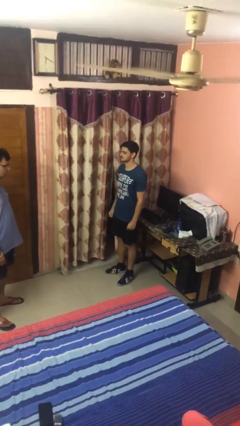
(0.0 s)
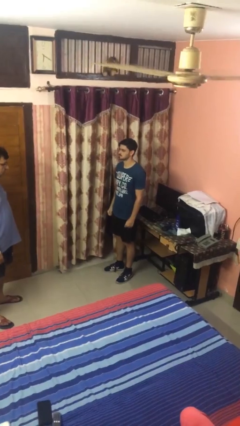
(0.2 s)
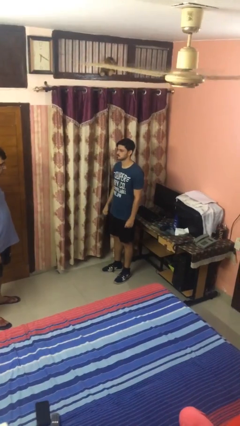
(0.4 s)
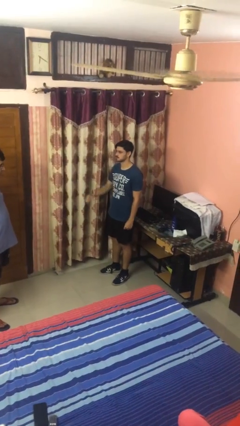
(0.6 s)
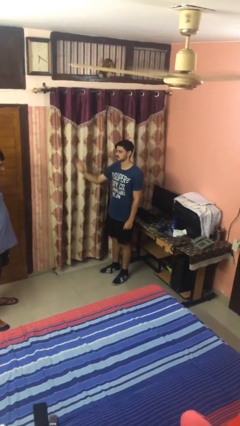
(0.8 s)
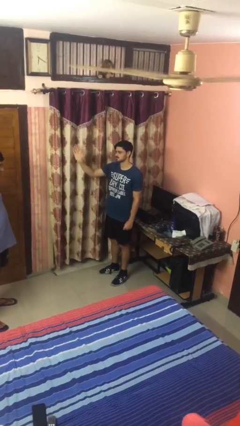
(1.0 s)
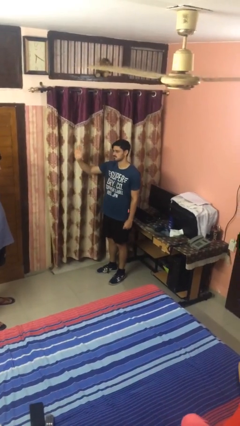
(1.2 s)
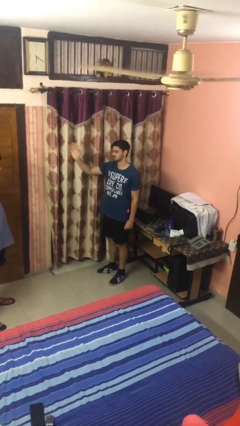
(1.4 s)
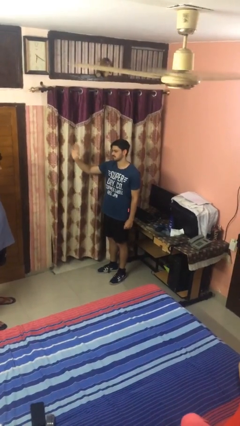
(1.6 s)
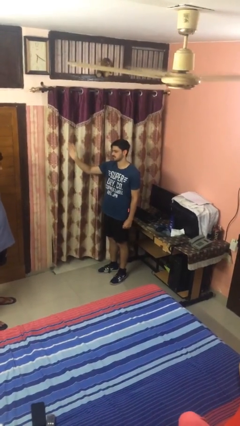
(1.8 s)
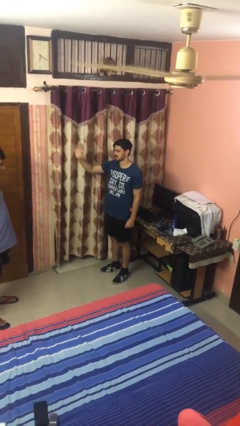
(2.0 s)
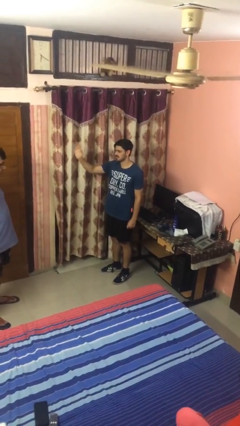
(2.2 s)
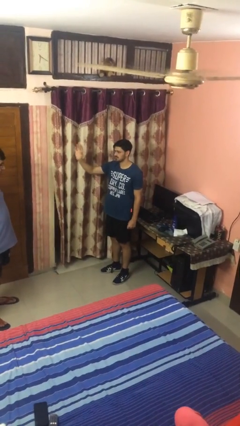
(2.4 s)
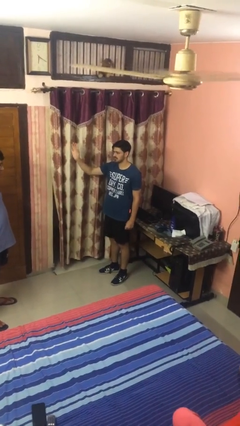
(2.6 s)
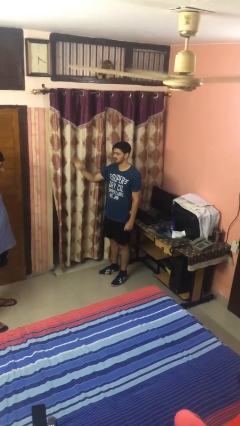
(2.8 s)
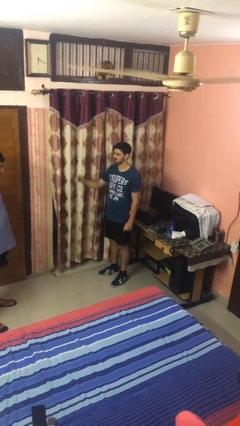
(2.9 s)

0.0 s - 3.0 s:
person waves at person

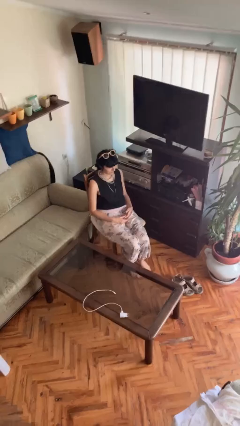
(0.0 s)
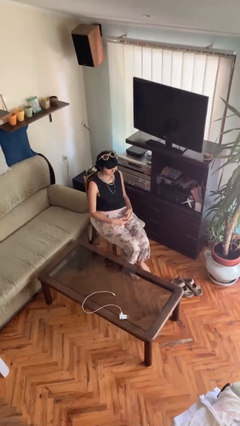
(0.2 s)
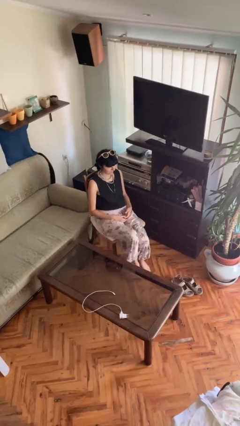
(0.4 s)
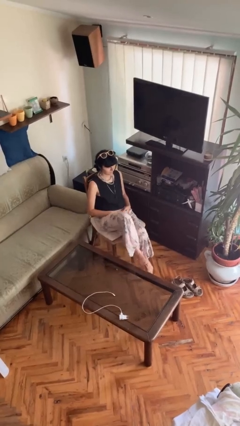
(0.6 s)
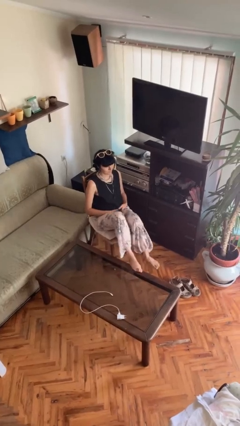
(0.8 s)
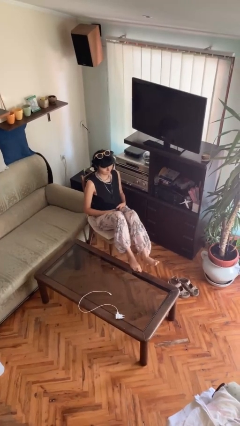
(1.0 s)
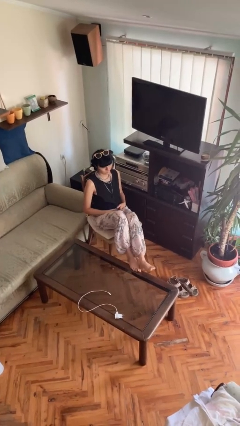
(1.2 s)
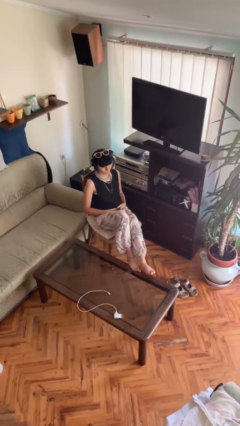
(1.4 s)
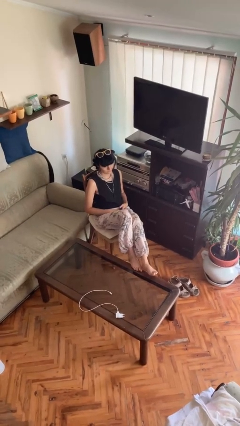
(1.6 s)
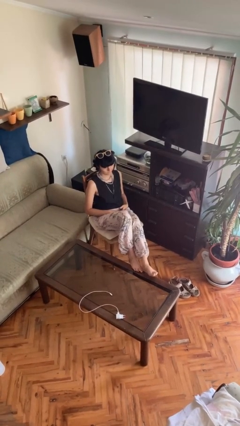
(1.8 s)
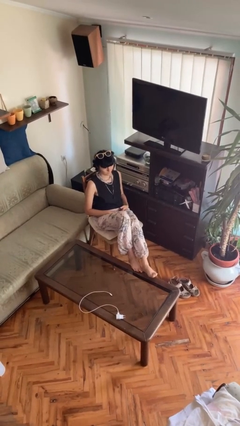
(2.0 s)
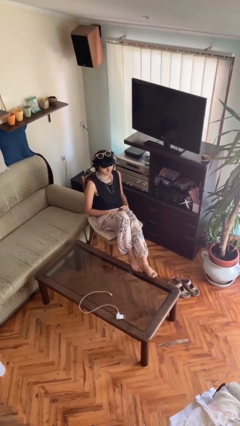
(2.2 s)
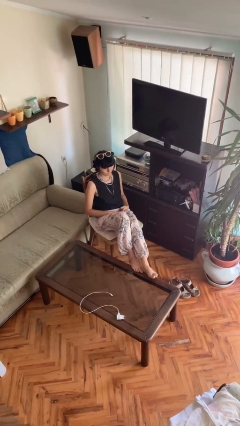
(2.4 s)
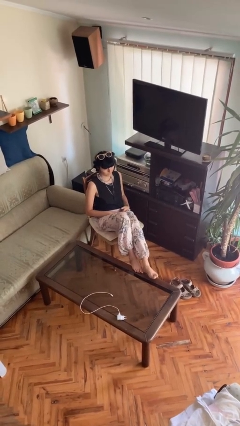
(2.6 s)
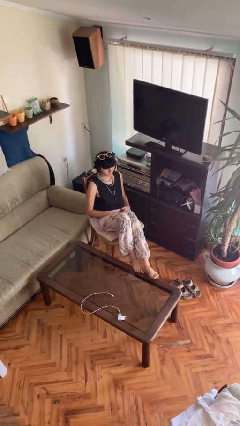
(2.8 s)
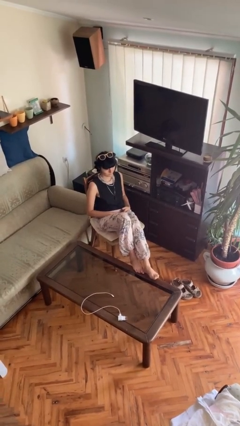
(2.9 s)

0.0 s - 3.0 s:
person puts feet up

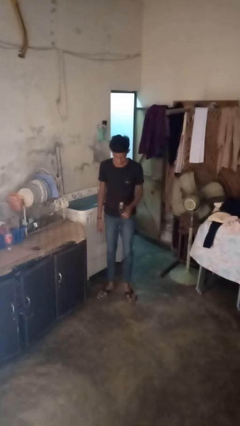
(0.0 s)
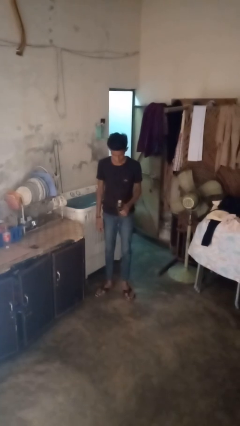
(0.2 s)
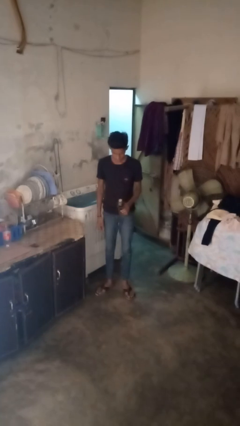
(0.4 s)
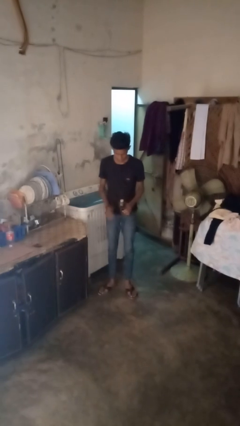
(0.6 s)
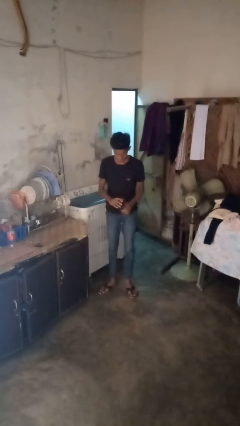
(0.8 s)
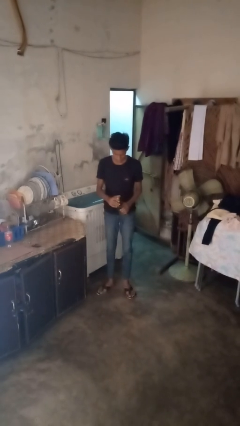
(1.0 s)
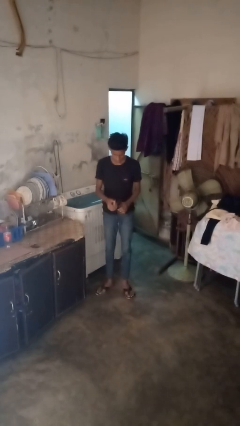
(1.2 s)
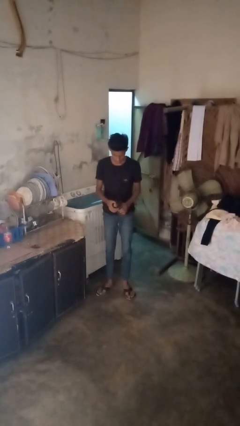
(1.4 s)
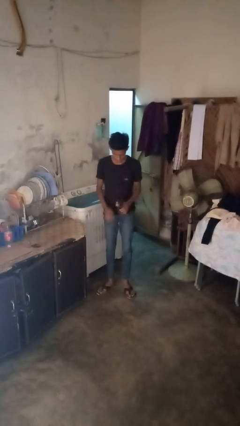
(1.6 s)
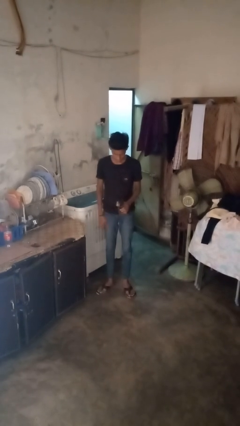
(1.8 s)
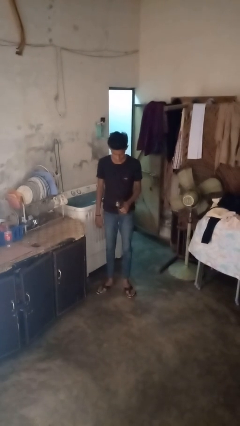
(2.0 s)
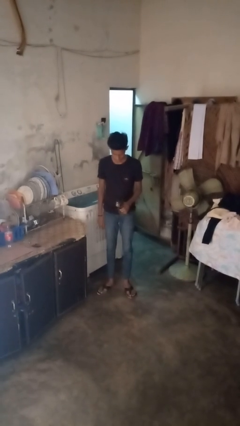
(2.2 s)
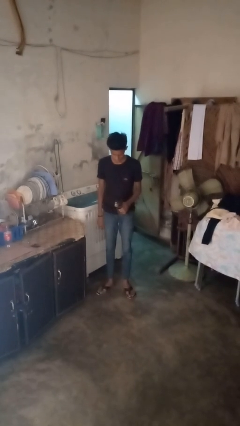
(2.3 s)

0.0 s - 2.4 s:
person opens can with can opener

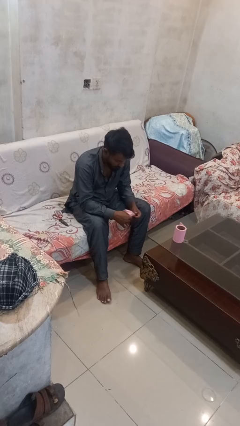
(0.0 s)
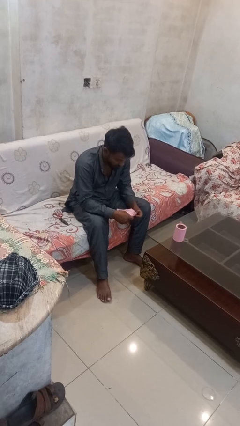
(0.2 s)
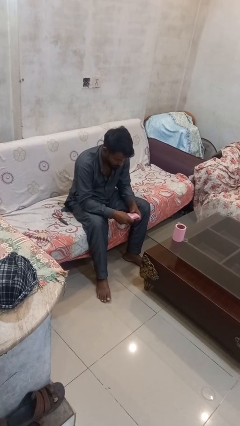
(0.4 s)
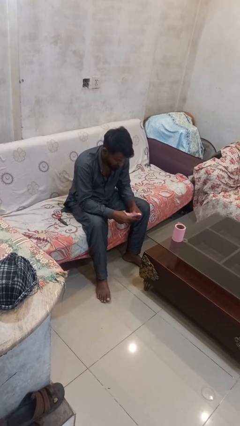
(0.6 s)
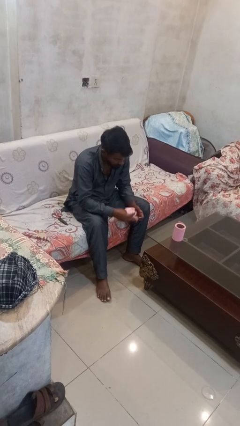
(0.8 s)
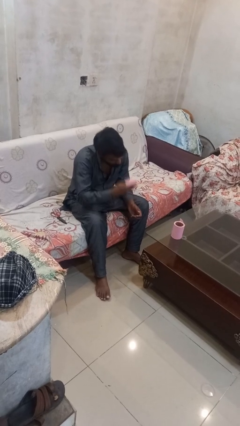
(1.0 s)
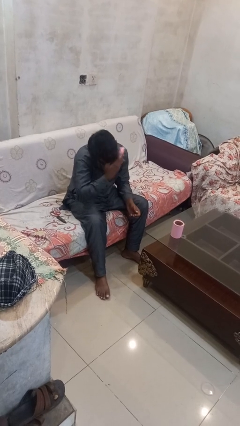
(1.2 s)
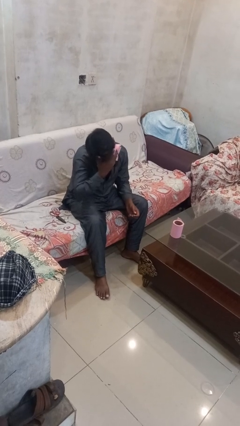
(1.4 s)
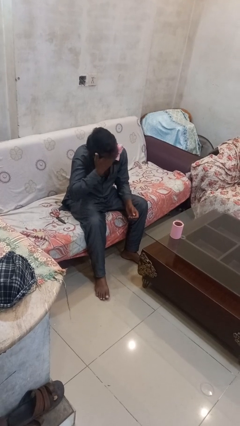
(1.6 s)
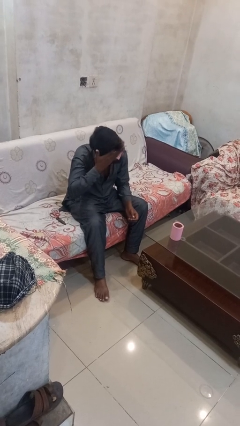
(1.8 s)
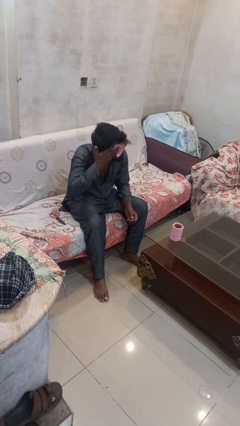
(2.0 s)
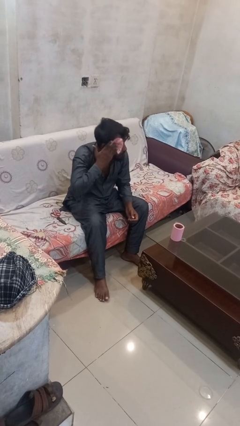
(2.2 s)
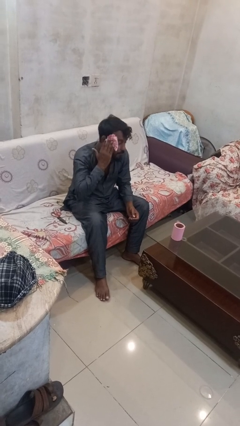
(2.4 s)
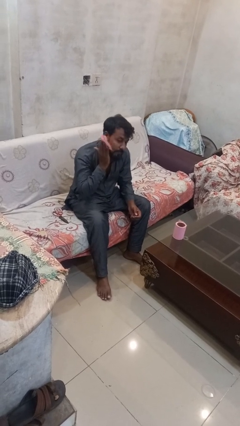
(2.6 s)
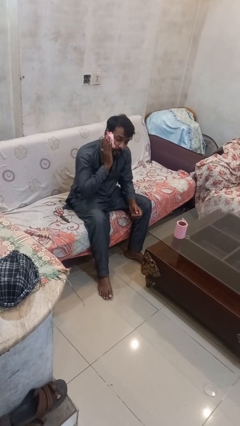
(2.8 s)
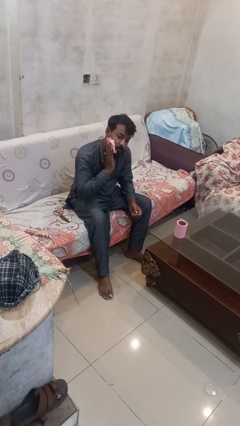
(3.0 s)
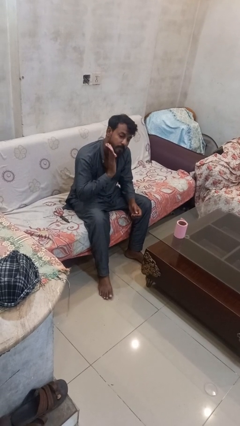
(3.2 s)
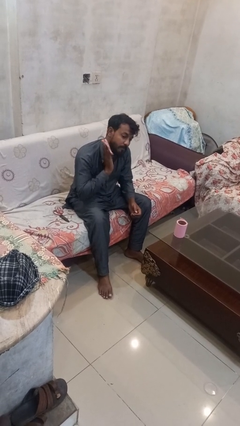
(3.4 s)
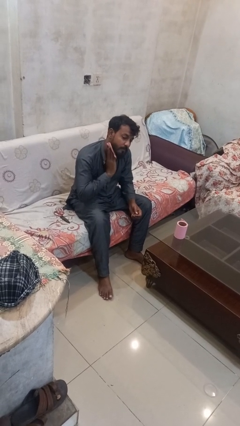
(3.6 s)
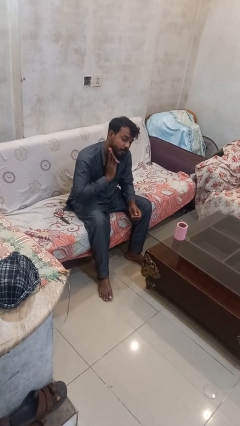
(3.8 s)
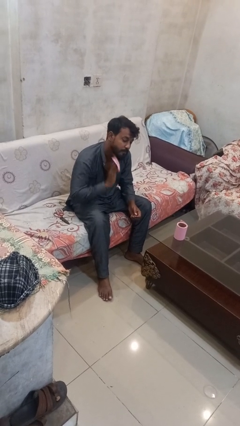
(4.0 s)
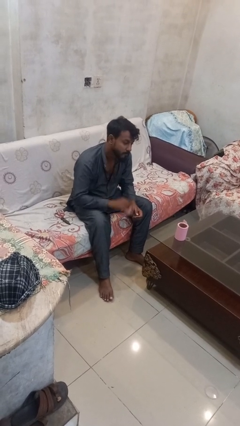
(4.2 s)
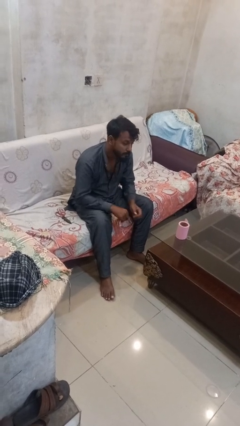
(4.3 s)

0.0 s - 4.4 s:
person wipes mouth with napkin

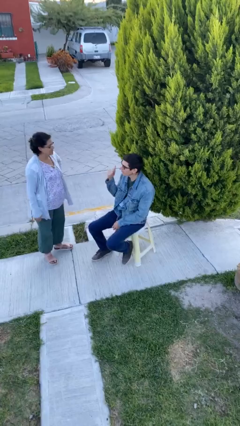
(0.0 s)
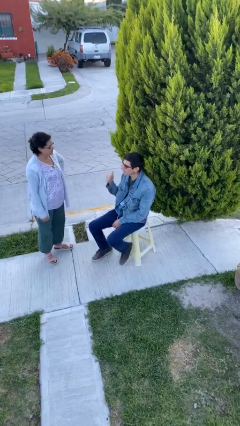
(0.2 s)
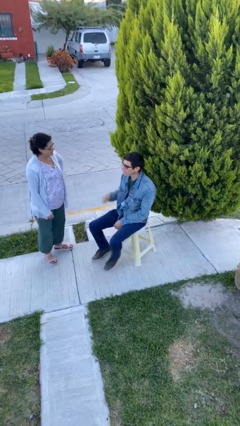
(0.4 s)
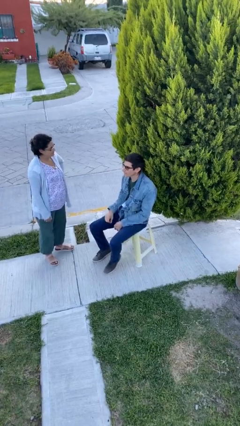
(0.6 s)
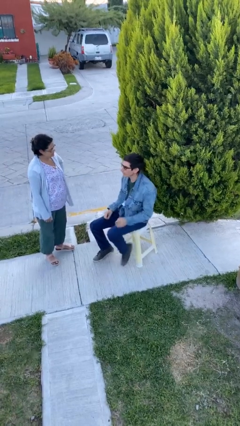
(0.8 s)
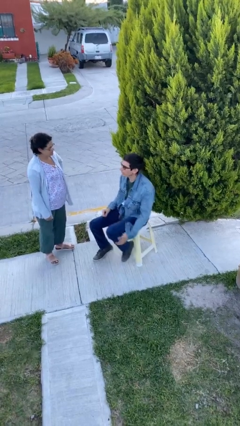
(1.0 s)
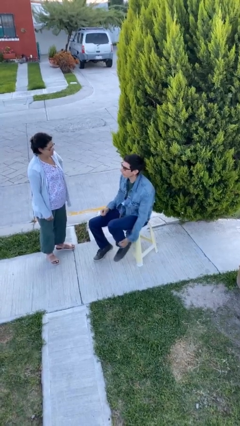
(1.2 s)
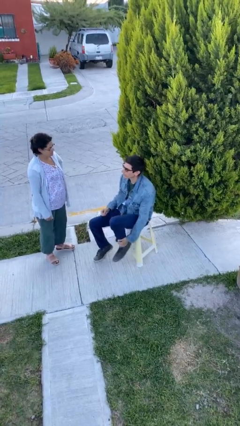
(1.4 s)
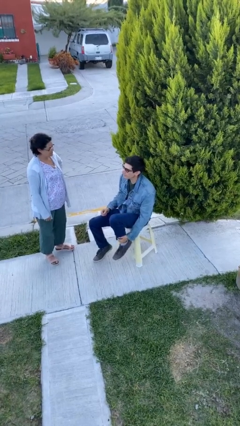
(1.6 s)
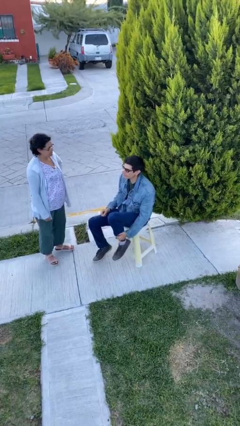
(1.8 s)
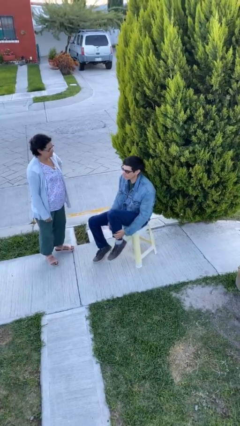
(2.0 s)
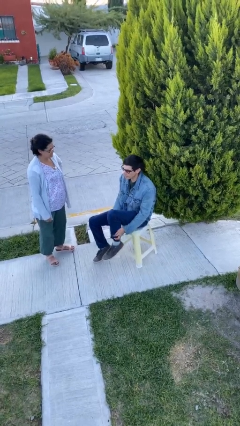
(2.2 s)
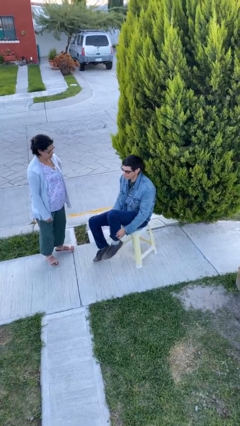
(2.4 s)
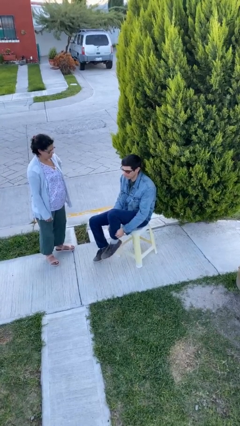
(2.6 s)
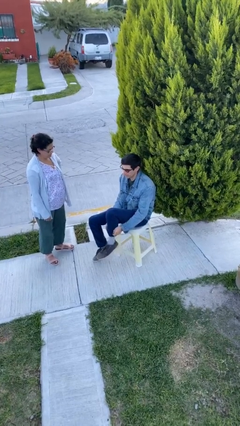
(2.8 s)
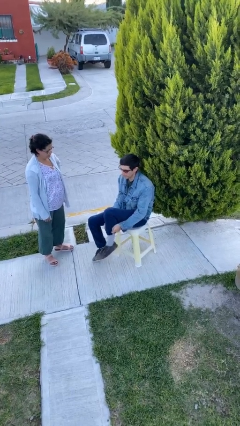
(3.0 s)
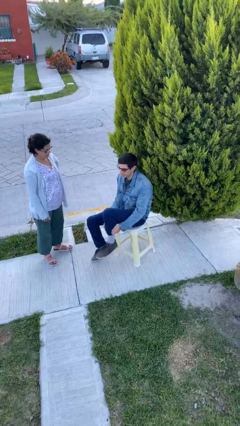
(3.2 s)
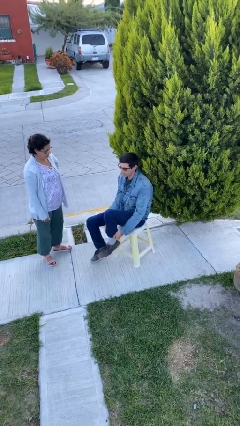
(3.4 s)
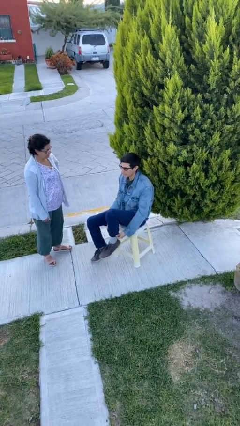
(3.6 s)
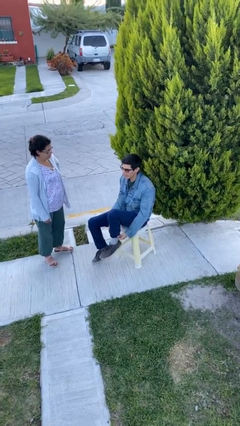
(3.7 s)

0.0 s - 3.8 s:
person talks to person

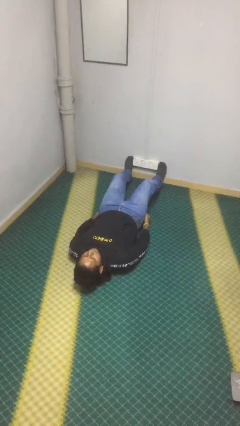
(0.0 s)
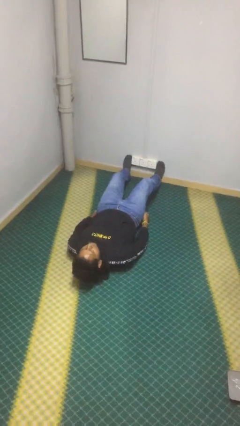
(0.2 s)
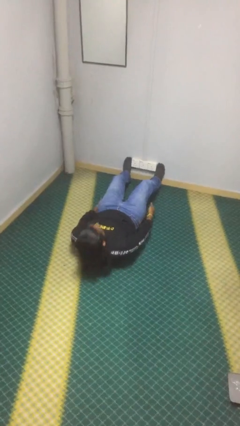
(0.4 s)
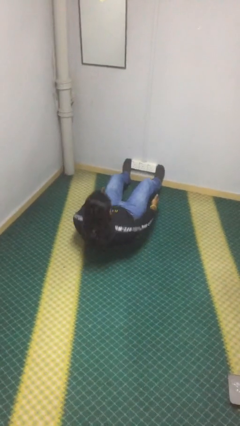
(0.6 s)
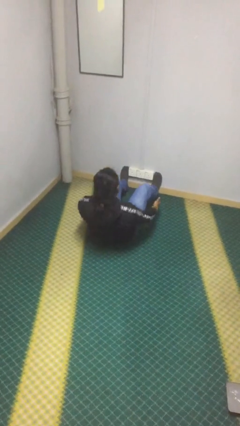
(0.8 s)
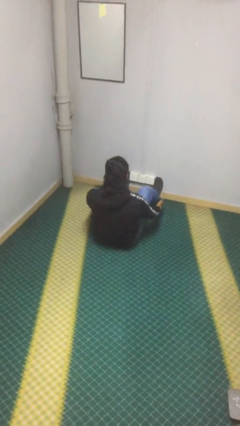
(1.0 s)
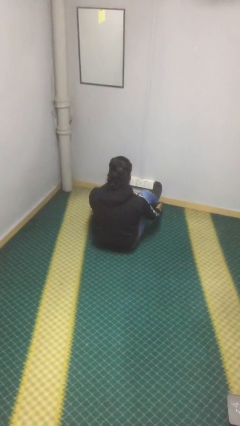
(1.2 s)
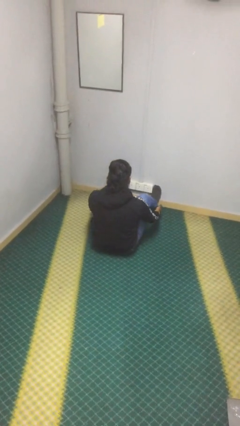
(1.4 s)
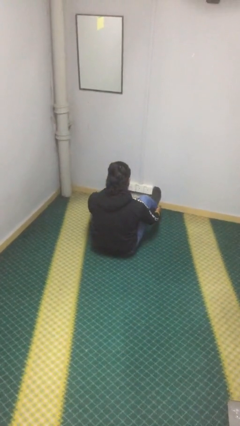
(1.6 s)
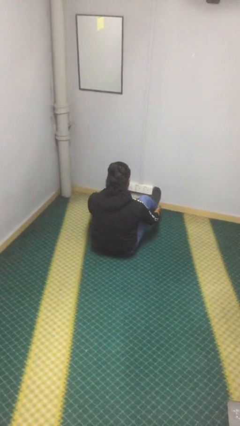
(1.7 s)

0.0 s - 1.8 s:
person exercises with situp
